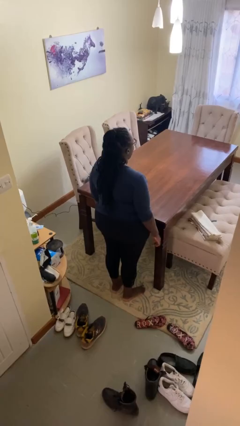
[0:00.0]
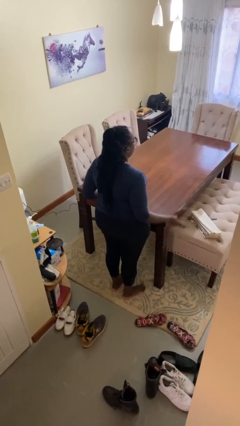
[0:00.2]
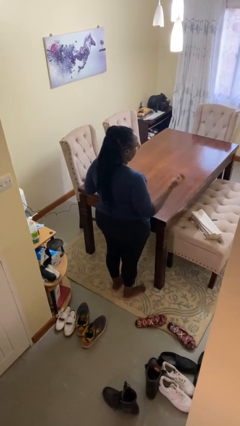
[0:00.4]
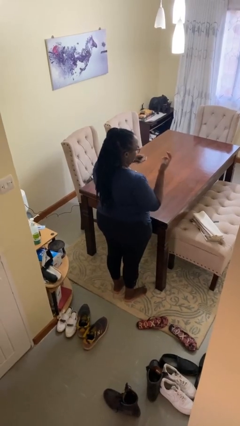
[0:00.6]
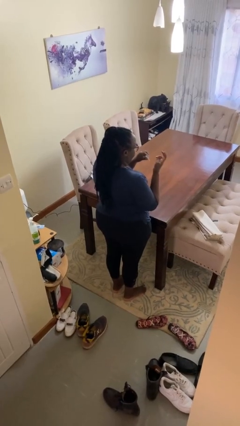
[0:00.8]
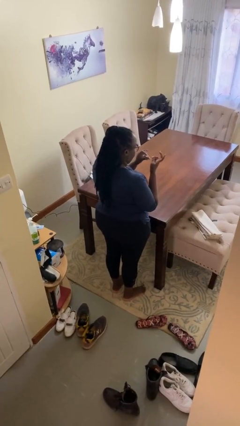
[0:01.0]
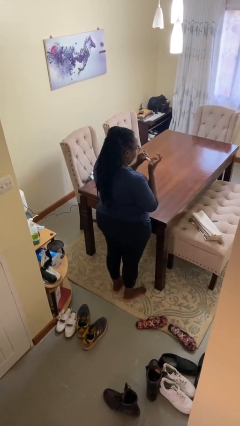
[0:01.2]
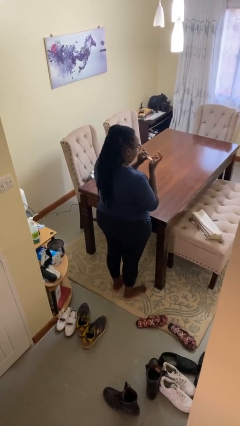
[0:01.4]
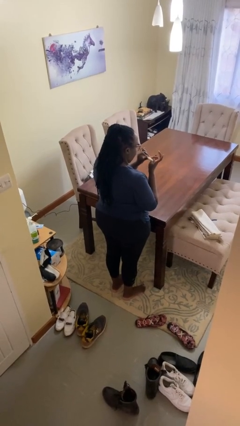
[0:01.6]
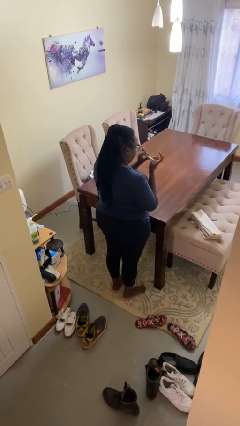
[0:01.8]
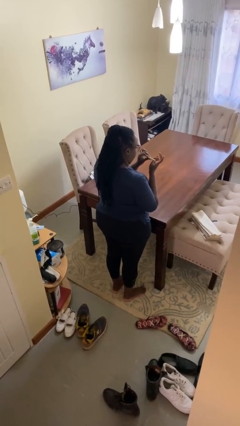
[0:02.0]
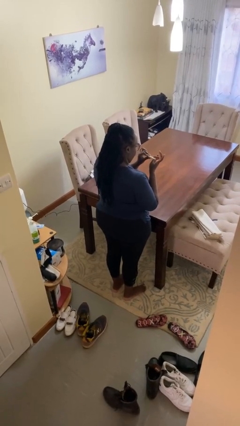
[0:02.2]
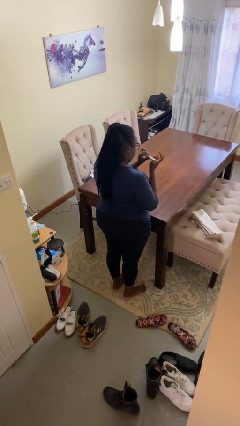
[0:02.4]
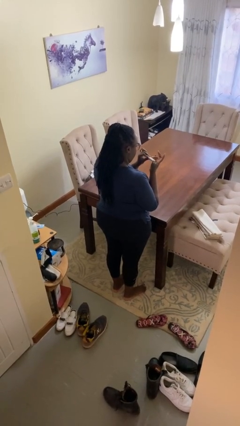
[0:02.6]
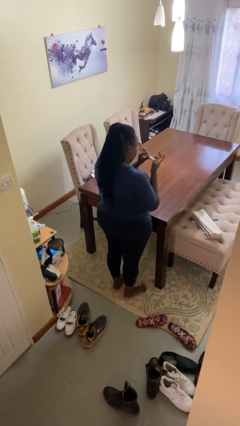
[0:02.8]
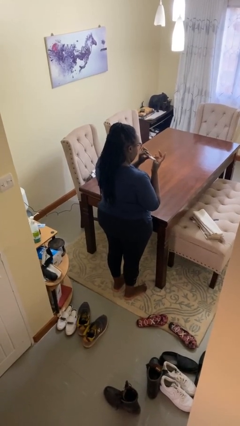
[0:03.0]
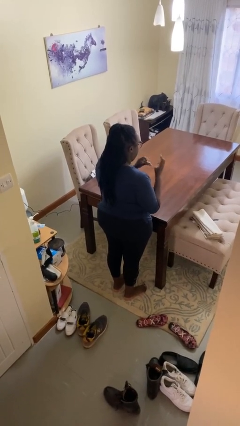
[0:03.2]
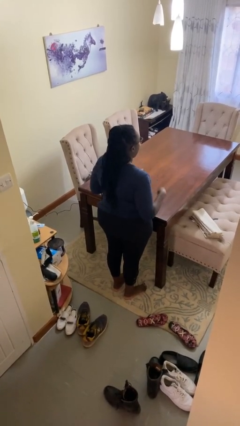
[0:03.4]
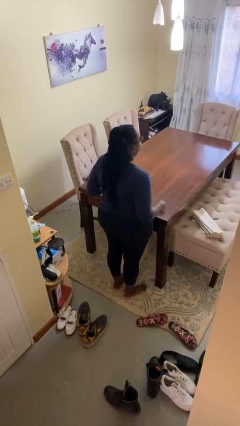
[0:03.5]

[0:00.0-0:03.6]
person files fingernails

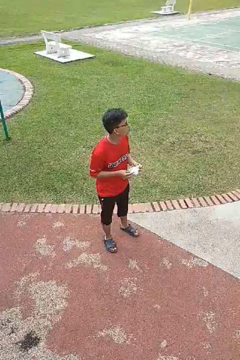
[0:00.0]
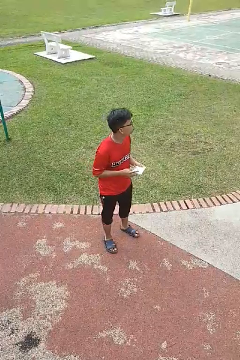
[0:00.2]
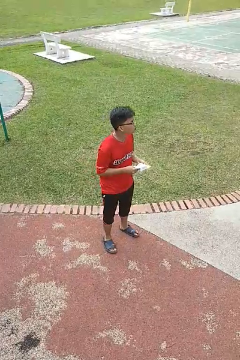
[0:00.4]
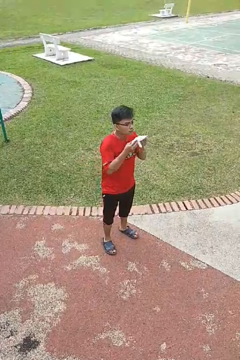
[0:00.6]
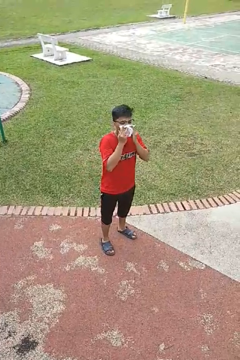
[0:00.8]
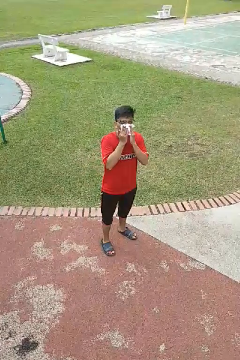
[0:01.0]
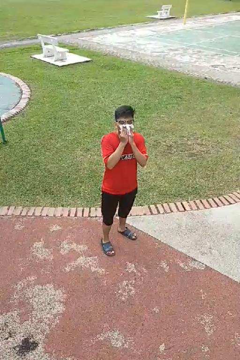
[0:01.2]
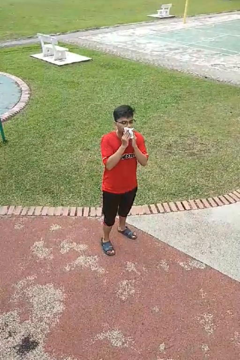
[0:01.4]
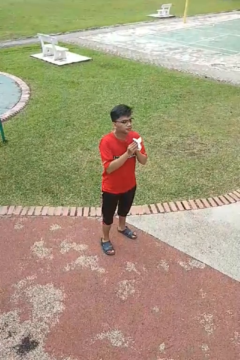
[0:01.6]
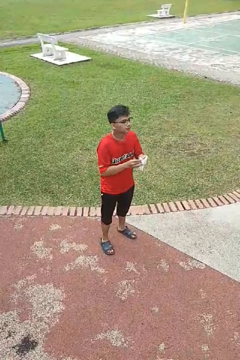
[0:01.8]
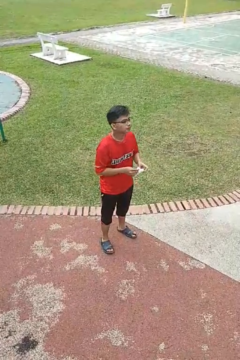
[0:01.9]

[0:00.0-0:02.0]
person blows nose

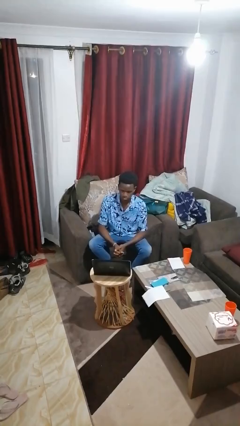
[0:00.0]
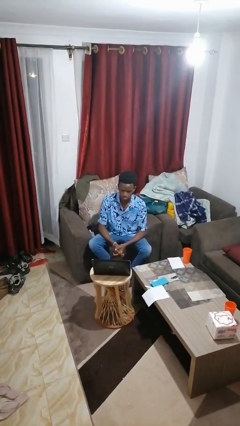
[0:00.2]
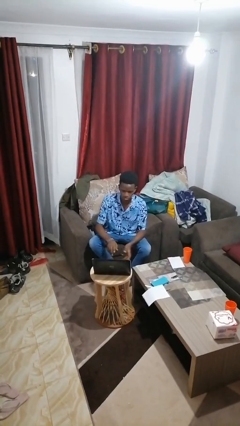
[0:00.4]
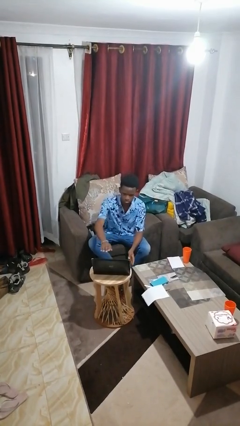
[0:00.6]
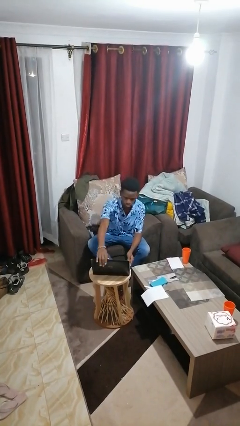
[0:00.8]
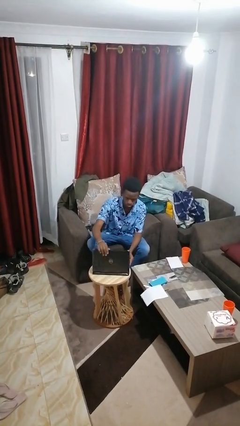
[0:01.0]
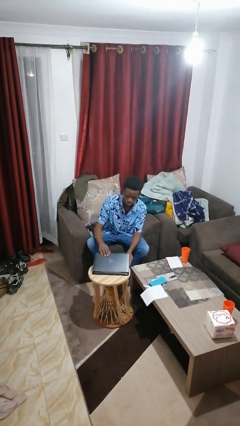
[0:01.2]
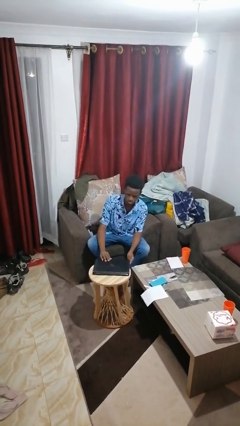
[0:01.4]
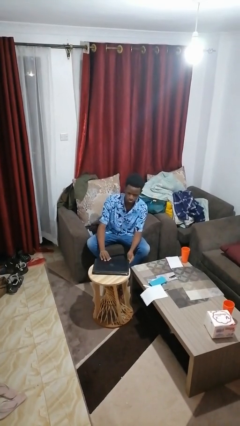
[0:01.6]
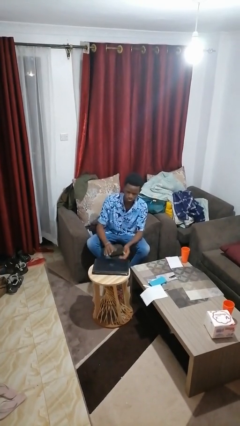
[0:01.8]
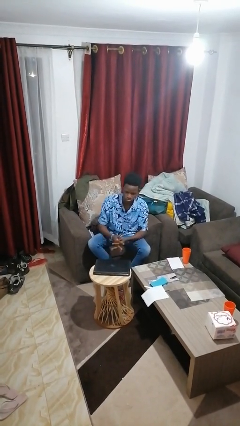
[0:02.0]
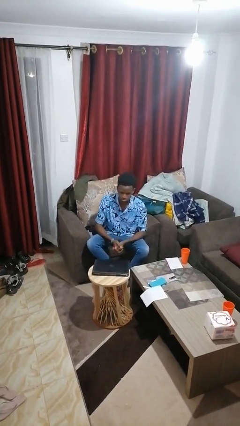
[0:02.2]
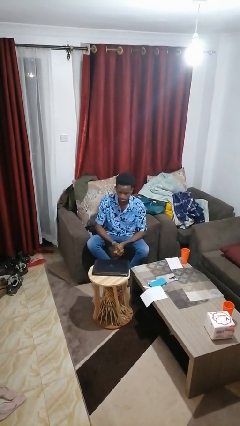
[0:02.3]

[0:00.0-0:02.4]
person closes laptop

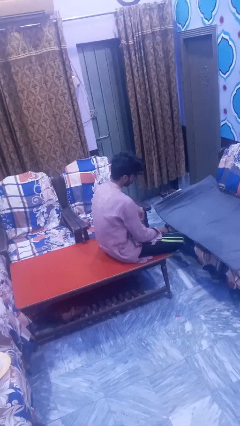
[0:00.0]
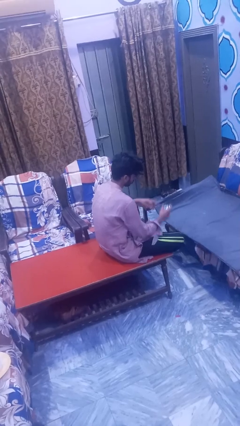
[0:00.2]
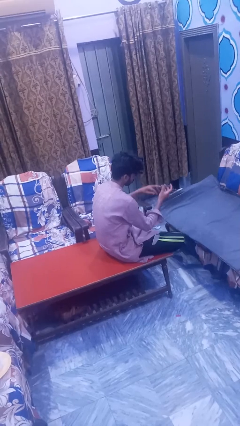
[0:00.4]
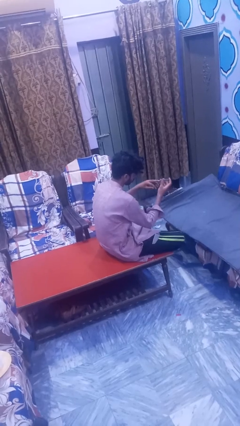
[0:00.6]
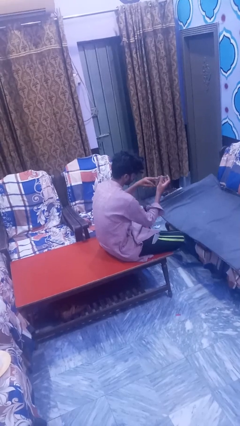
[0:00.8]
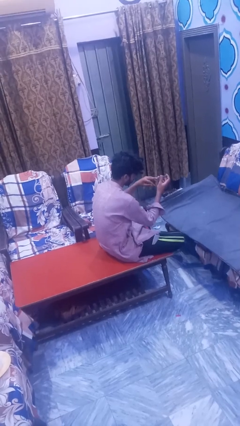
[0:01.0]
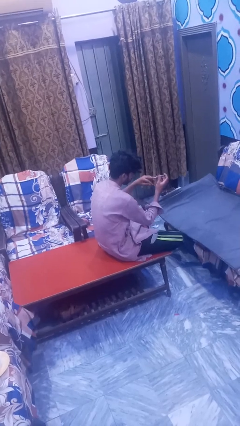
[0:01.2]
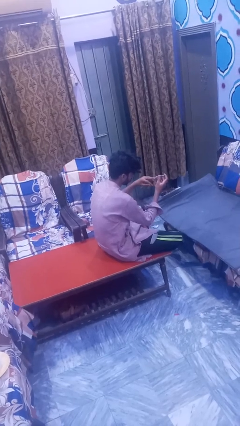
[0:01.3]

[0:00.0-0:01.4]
person clips fingernails

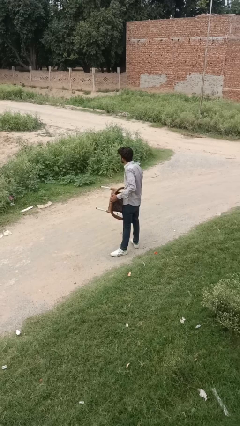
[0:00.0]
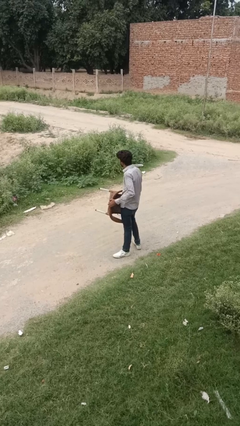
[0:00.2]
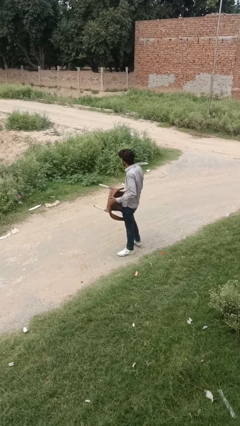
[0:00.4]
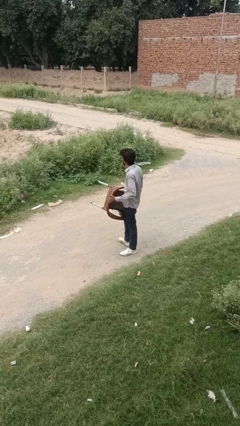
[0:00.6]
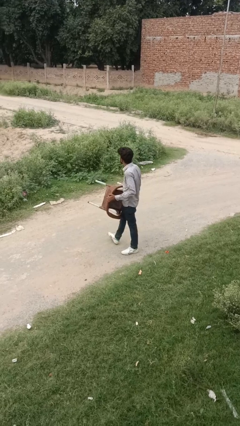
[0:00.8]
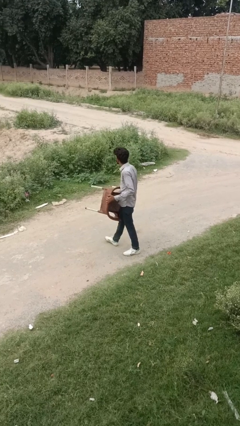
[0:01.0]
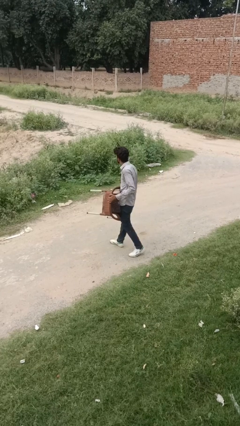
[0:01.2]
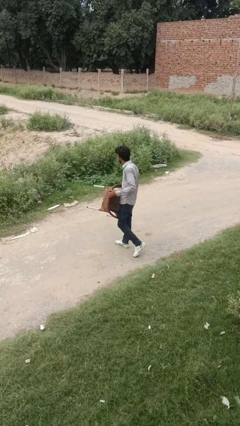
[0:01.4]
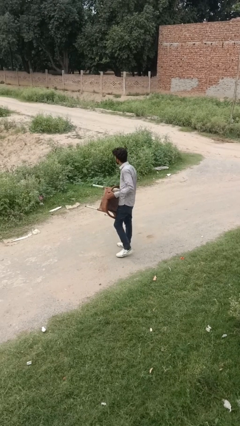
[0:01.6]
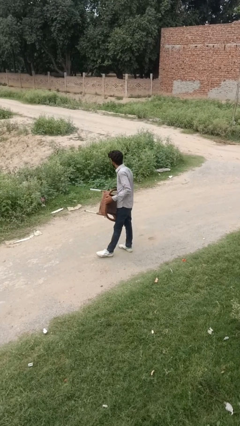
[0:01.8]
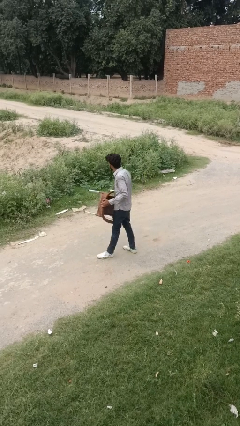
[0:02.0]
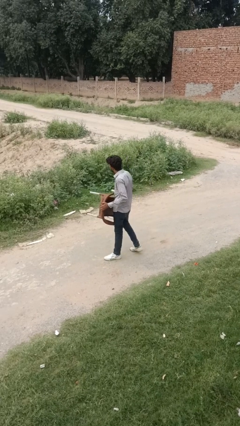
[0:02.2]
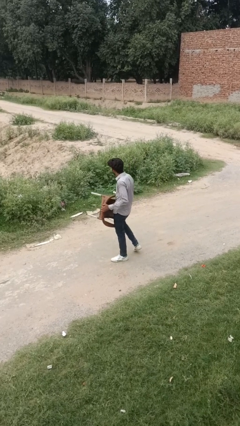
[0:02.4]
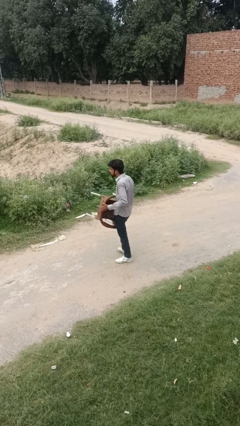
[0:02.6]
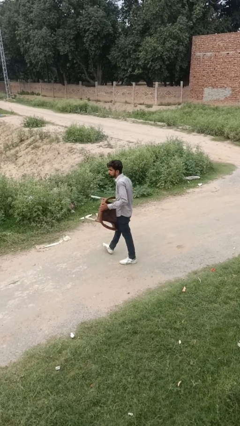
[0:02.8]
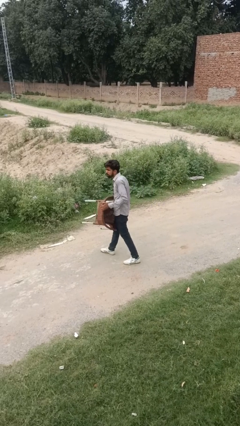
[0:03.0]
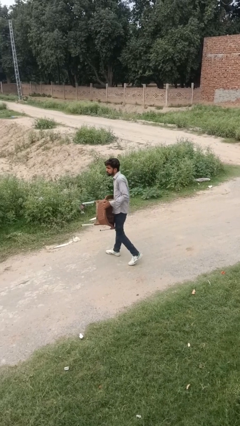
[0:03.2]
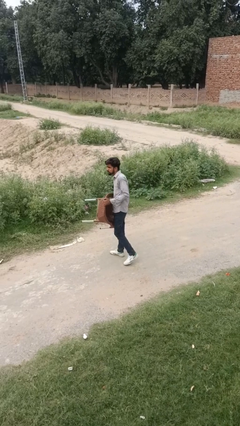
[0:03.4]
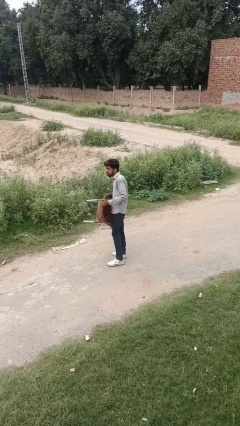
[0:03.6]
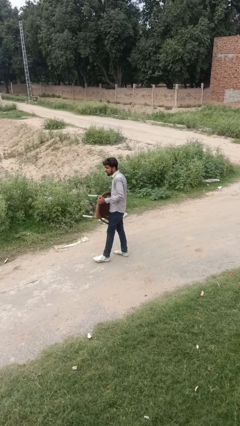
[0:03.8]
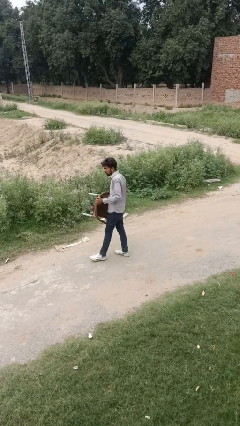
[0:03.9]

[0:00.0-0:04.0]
person carries furniture

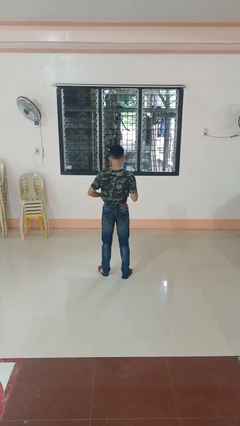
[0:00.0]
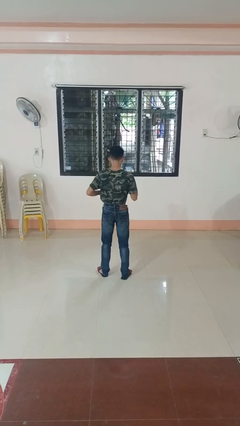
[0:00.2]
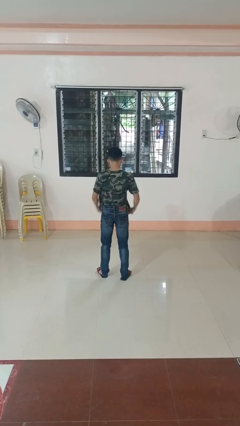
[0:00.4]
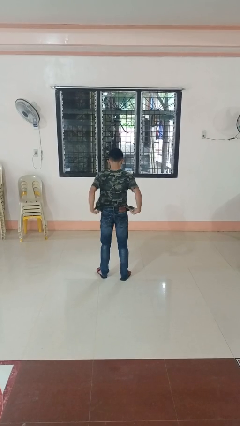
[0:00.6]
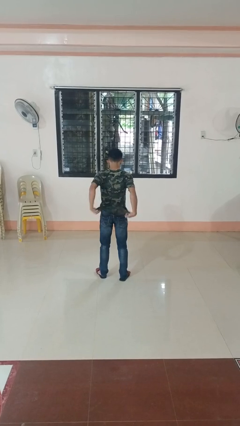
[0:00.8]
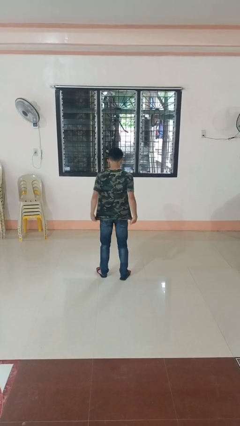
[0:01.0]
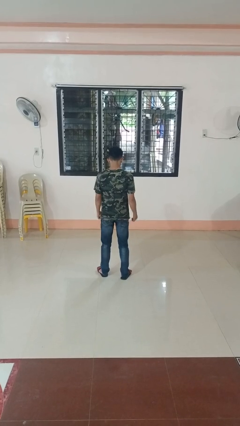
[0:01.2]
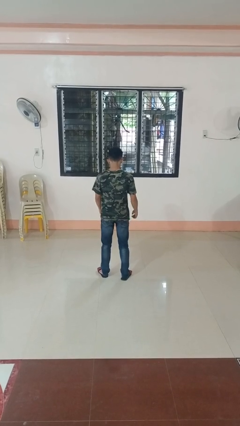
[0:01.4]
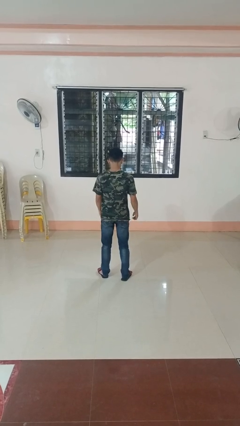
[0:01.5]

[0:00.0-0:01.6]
person untucks shirt

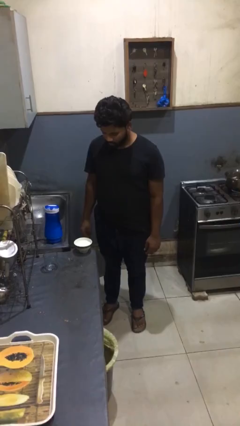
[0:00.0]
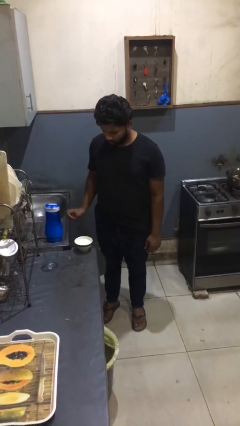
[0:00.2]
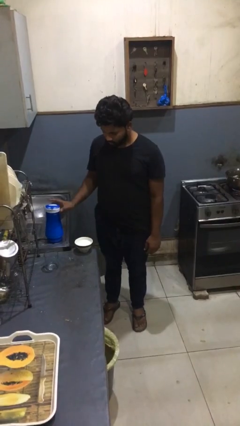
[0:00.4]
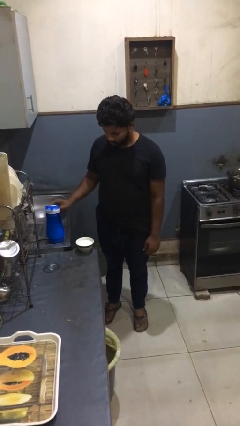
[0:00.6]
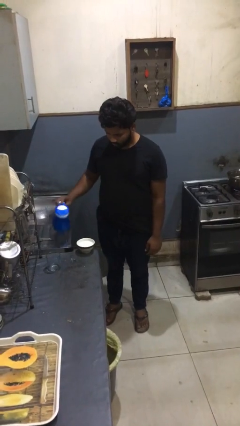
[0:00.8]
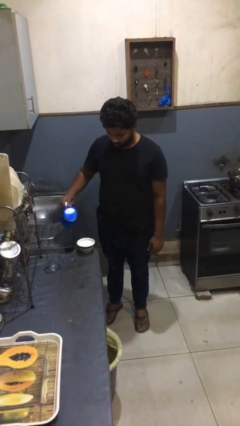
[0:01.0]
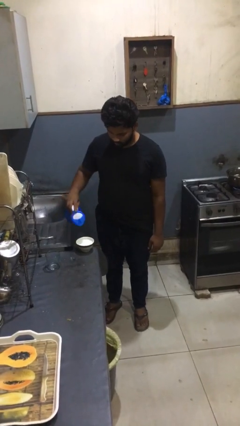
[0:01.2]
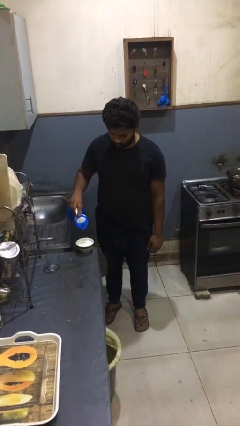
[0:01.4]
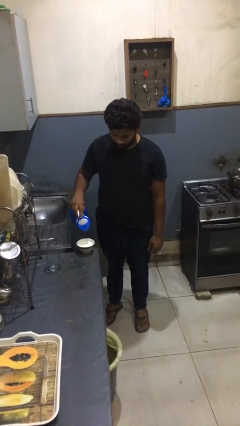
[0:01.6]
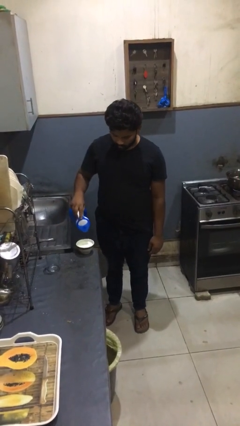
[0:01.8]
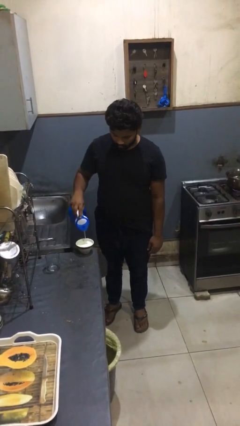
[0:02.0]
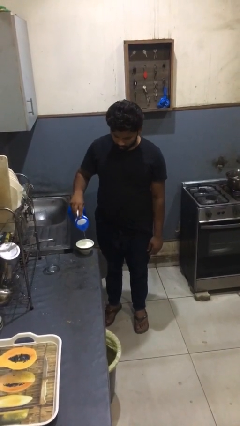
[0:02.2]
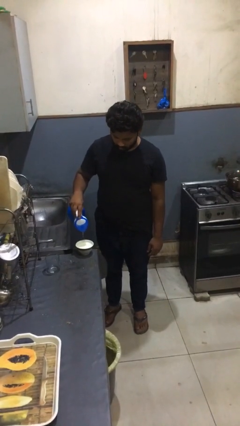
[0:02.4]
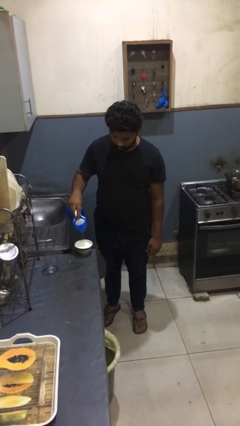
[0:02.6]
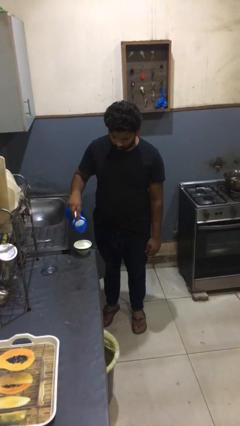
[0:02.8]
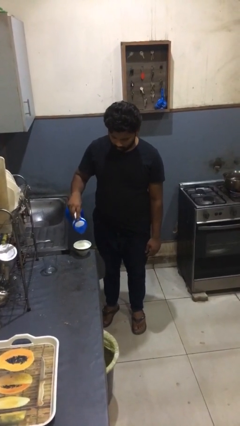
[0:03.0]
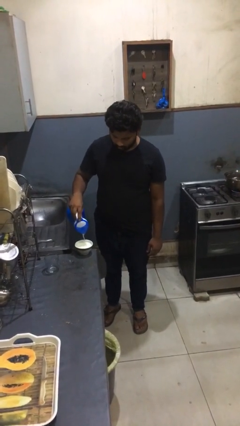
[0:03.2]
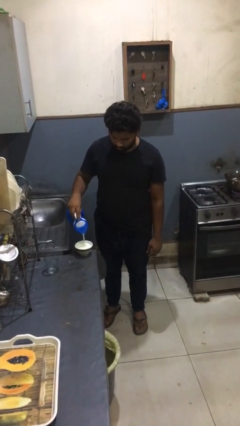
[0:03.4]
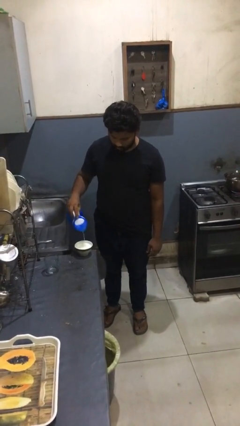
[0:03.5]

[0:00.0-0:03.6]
person pours into bowl
